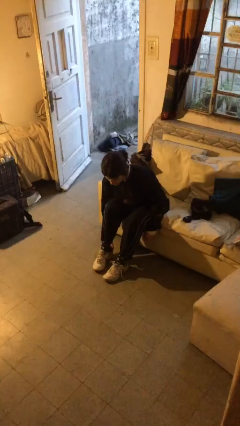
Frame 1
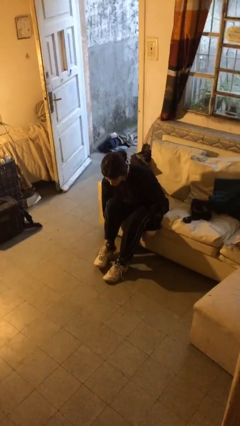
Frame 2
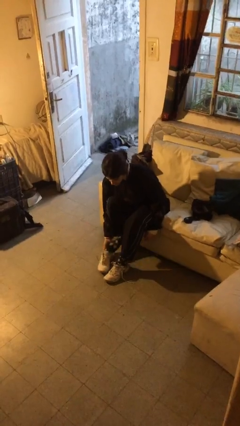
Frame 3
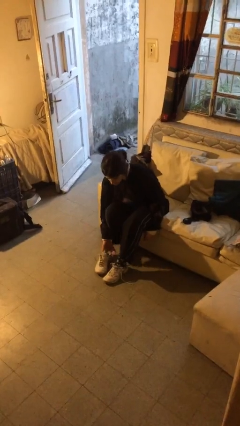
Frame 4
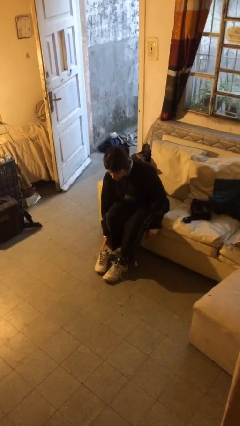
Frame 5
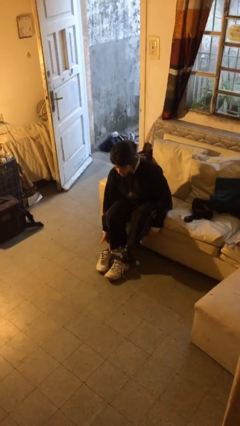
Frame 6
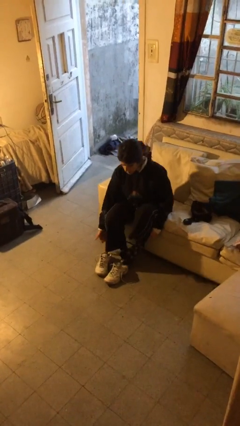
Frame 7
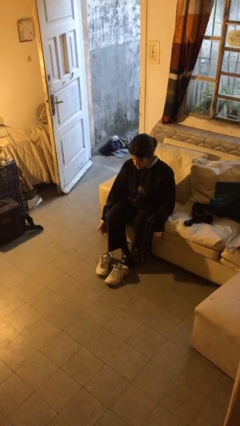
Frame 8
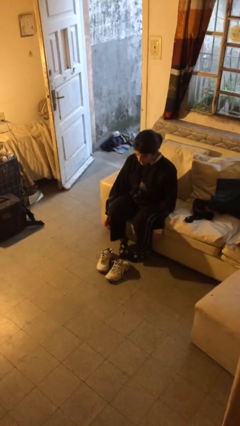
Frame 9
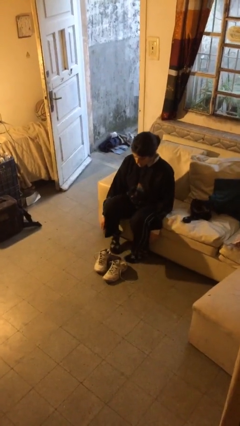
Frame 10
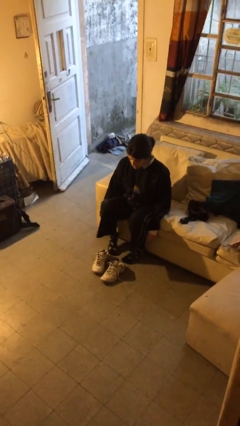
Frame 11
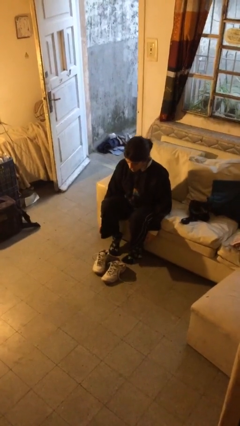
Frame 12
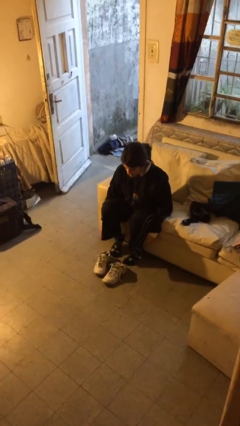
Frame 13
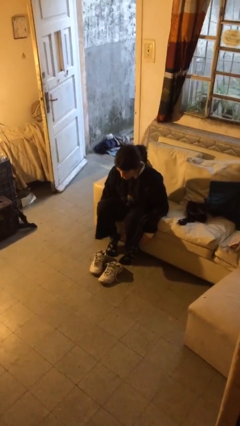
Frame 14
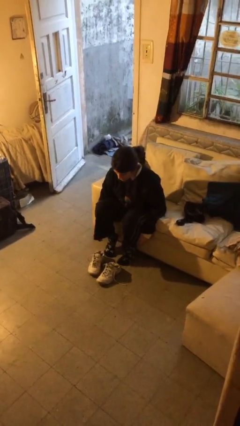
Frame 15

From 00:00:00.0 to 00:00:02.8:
person takes off shoes

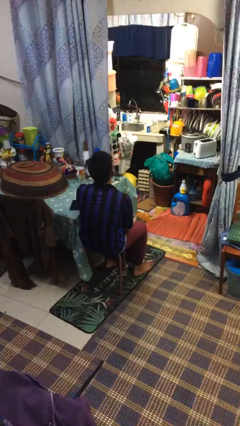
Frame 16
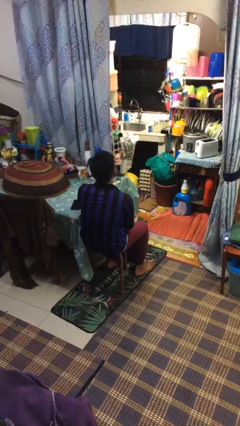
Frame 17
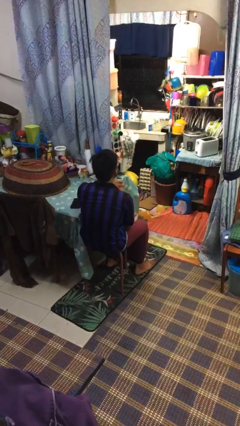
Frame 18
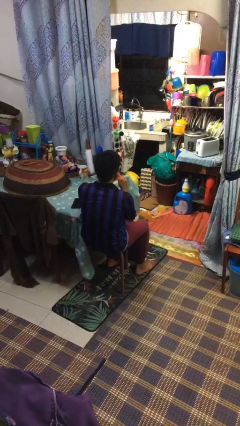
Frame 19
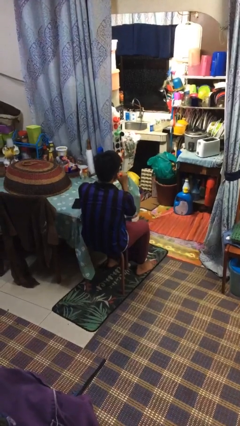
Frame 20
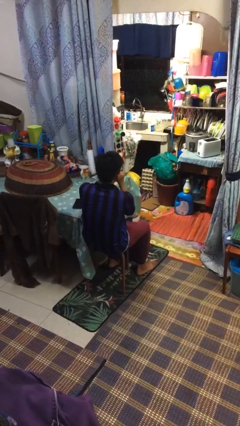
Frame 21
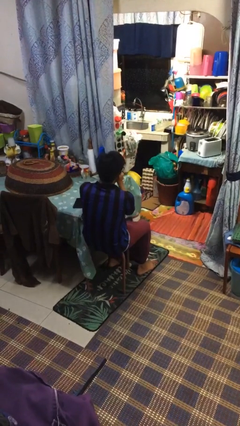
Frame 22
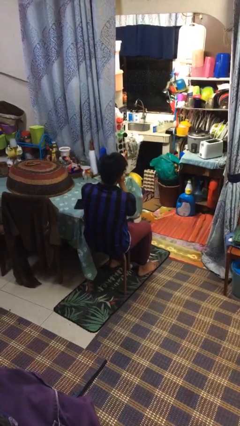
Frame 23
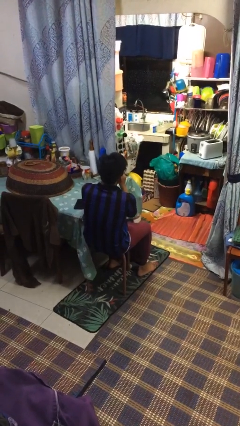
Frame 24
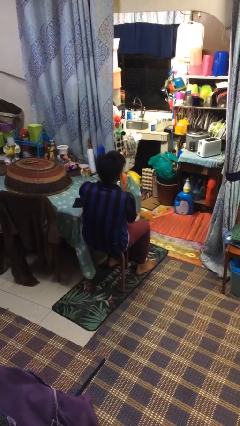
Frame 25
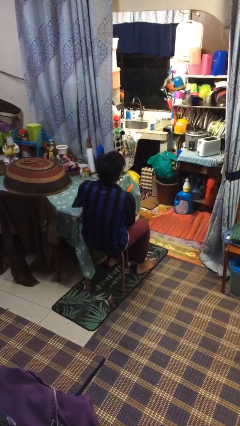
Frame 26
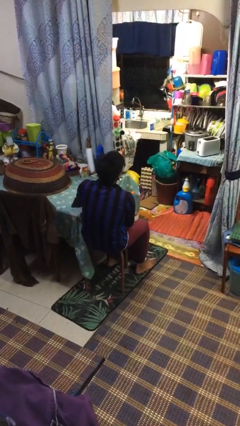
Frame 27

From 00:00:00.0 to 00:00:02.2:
person vapes

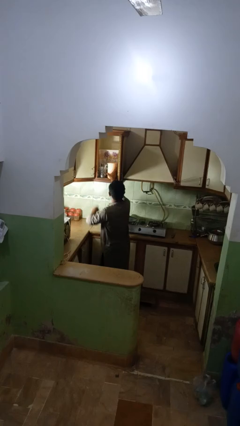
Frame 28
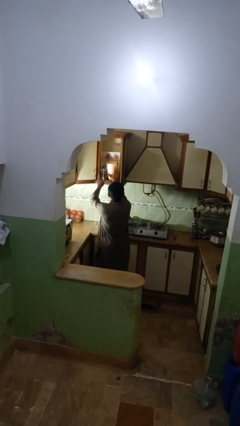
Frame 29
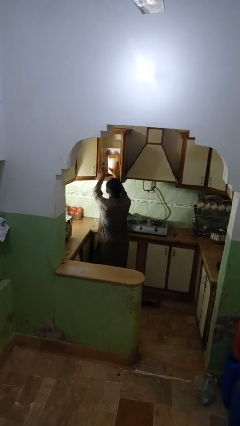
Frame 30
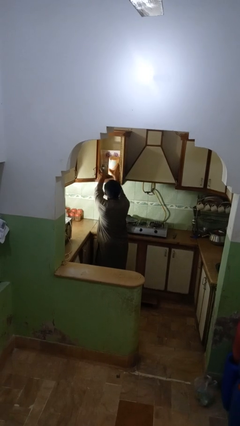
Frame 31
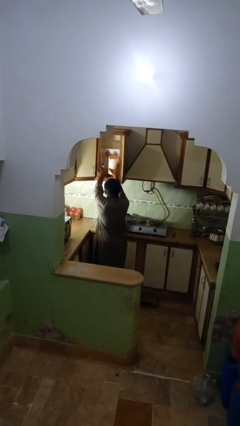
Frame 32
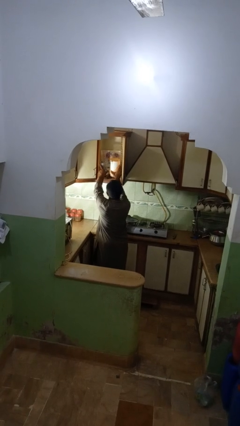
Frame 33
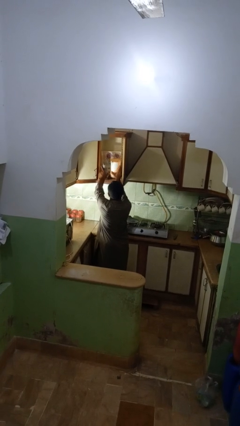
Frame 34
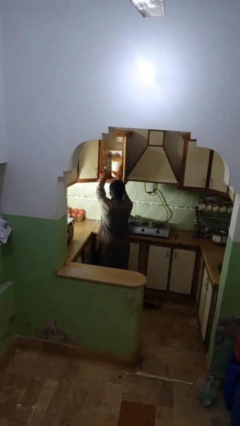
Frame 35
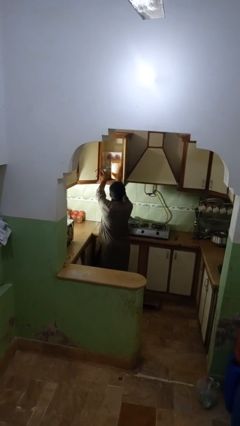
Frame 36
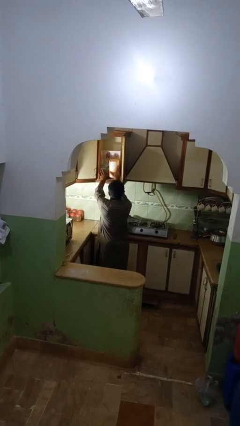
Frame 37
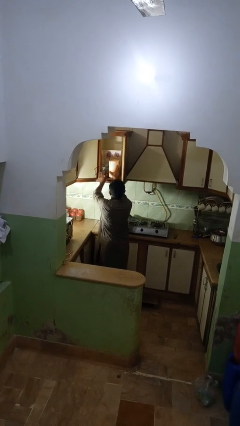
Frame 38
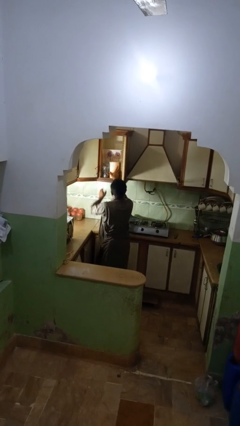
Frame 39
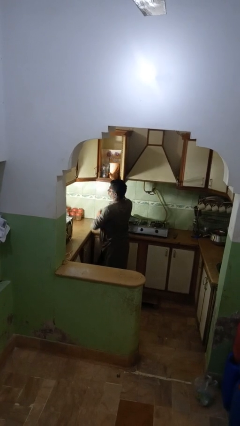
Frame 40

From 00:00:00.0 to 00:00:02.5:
person searches in kitchen drawer

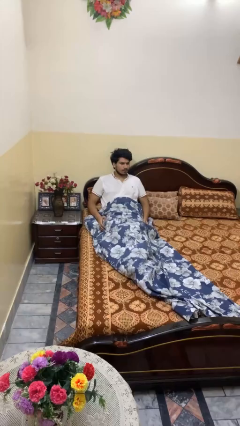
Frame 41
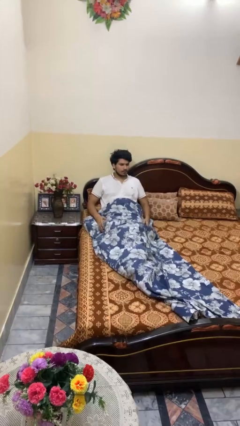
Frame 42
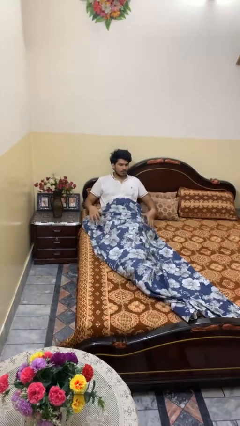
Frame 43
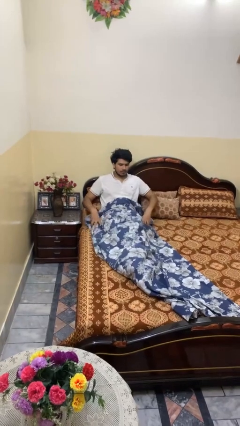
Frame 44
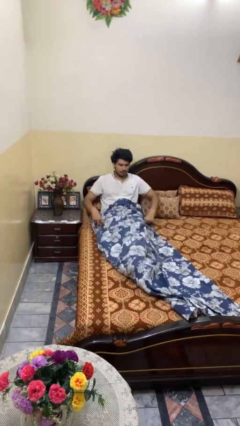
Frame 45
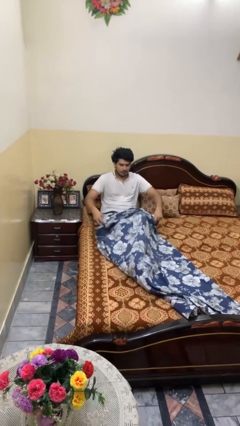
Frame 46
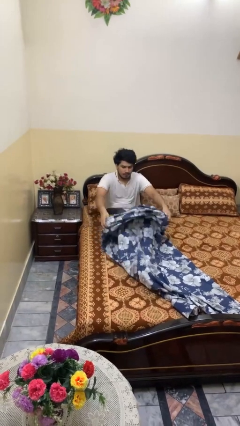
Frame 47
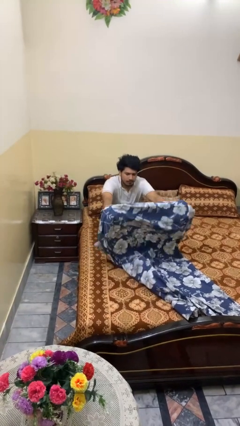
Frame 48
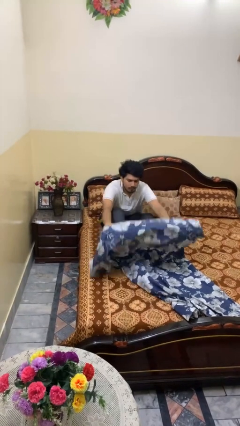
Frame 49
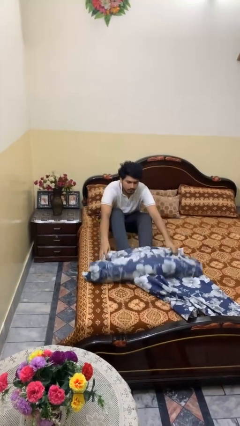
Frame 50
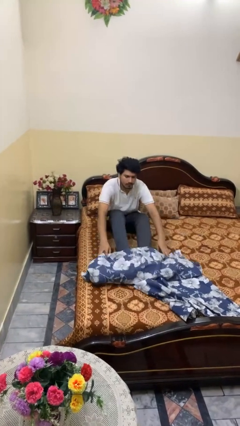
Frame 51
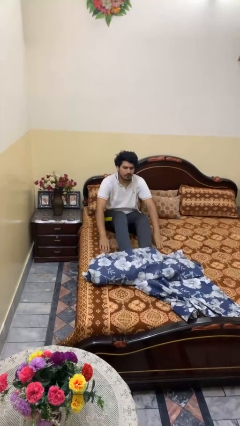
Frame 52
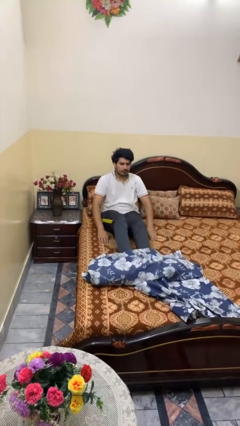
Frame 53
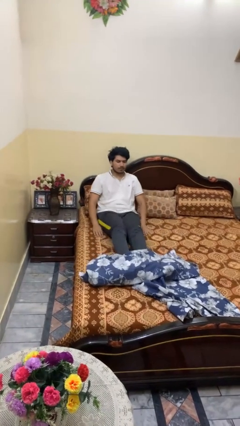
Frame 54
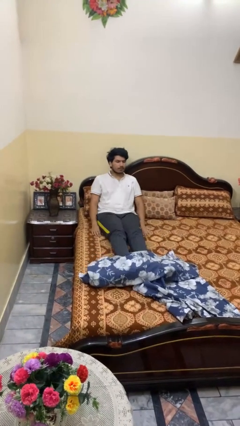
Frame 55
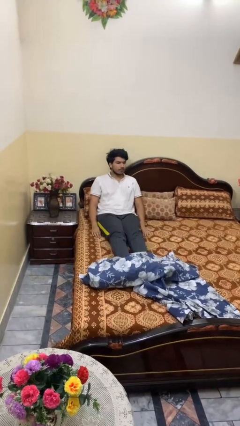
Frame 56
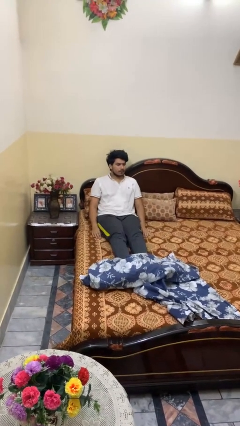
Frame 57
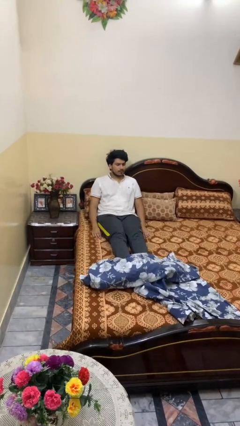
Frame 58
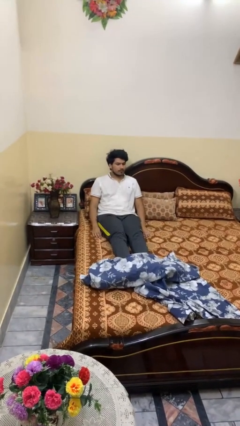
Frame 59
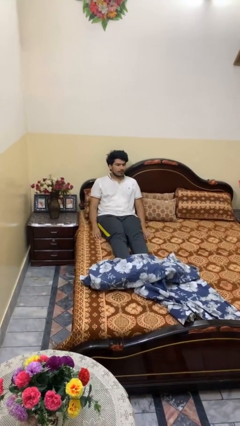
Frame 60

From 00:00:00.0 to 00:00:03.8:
person uncovers with bedsheets

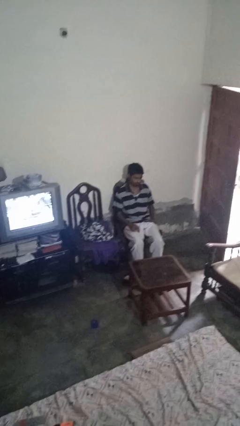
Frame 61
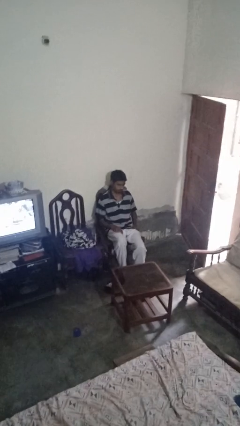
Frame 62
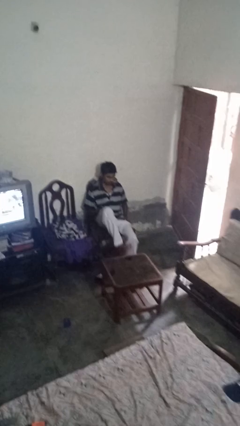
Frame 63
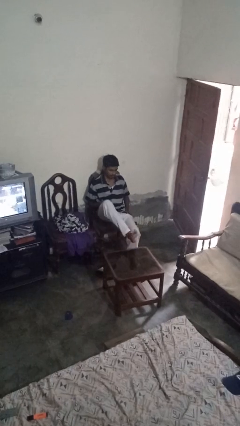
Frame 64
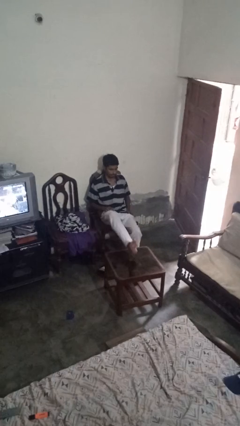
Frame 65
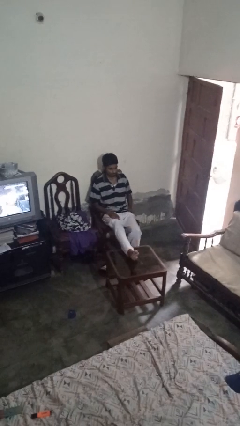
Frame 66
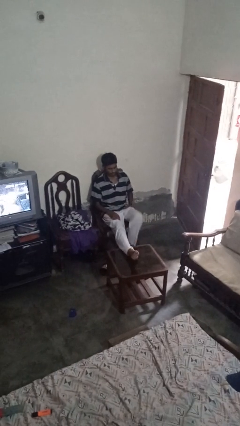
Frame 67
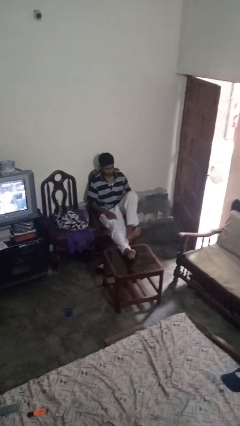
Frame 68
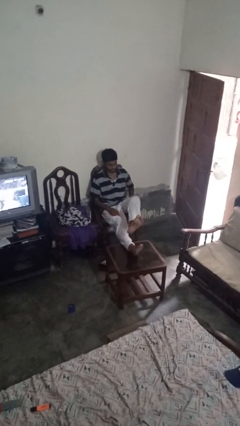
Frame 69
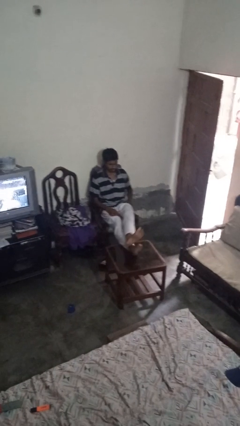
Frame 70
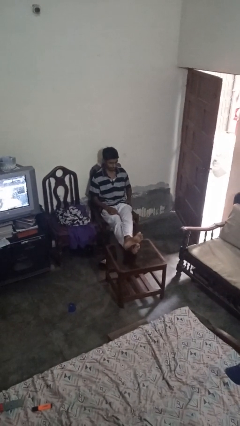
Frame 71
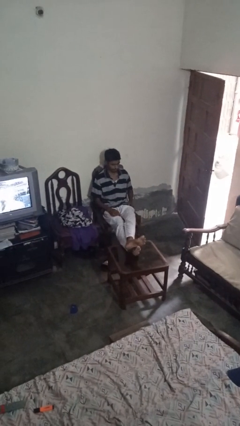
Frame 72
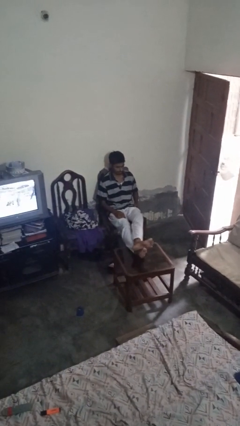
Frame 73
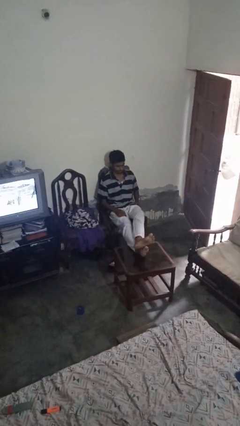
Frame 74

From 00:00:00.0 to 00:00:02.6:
person puts feet up

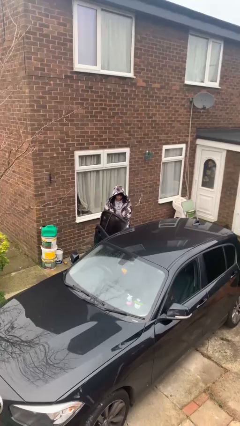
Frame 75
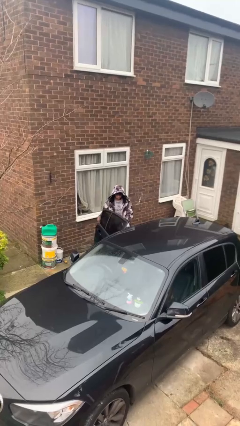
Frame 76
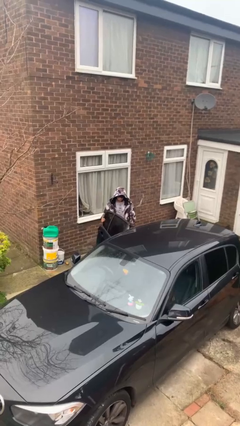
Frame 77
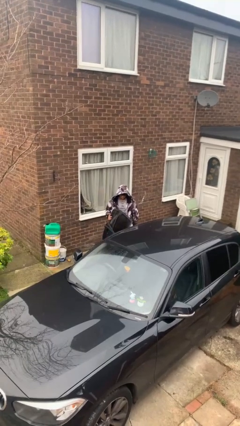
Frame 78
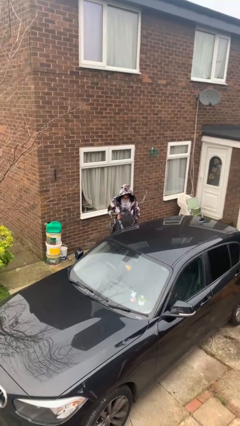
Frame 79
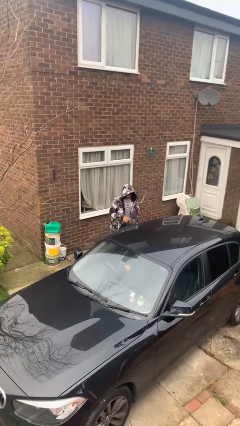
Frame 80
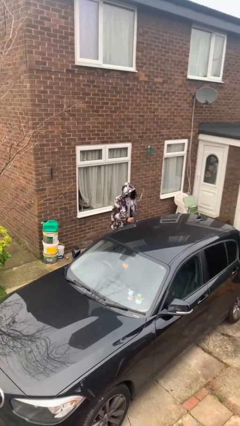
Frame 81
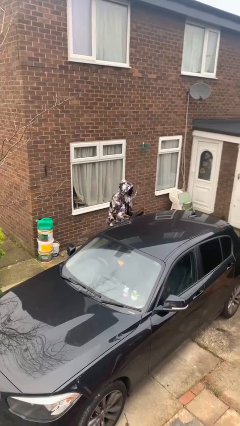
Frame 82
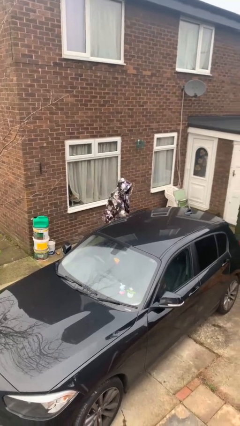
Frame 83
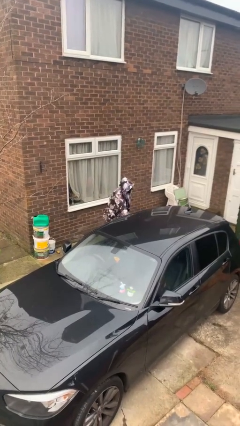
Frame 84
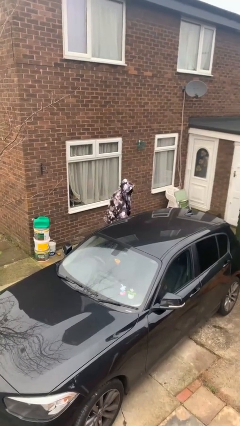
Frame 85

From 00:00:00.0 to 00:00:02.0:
person closes car door

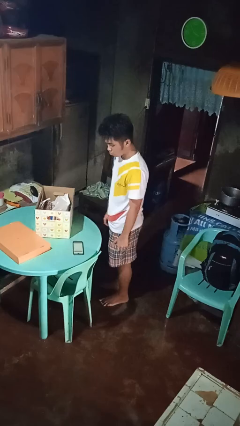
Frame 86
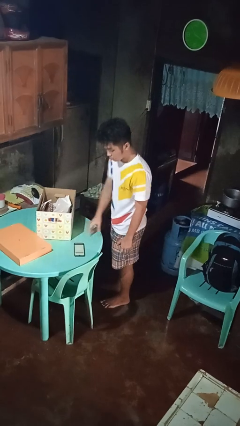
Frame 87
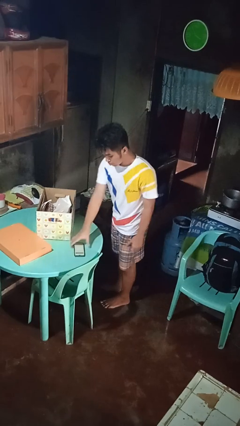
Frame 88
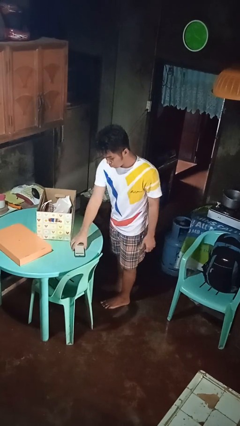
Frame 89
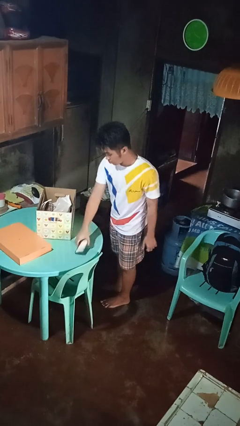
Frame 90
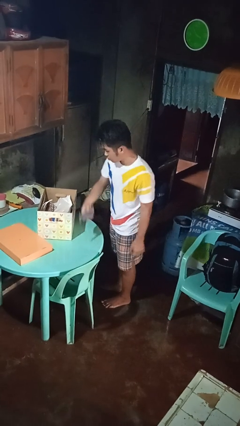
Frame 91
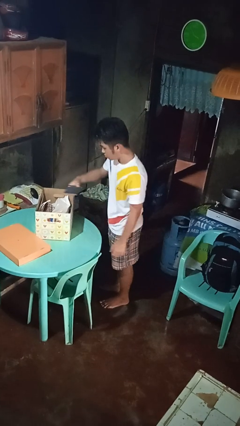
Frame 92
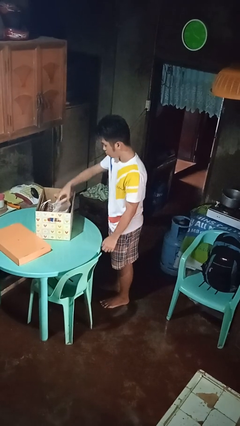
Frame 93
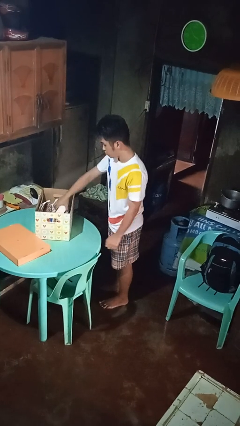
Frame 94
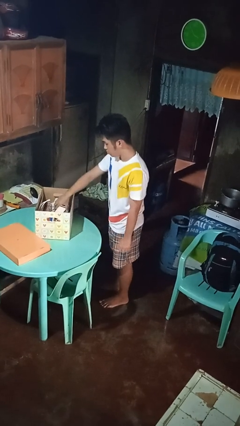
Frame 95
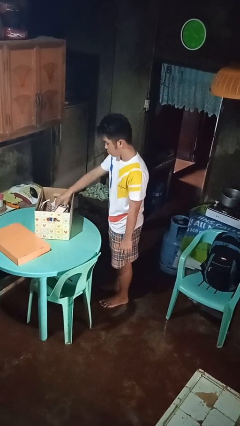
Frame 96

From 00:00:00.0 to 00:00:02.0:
person puts object into box
